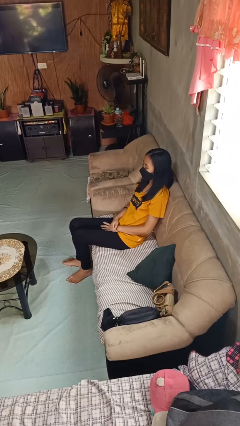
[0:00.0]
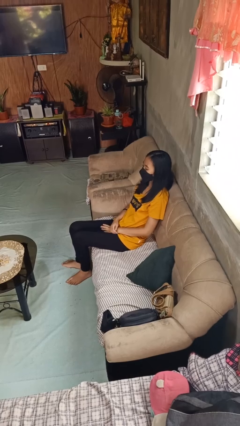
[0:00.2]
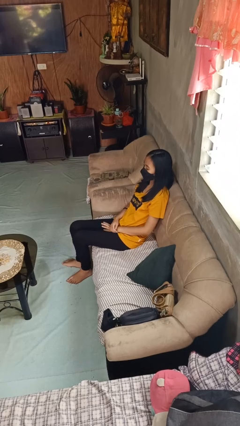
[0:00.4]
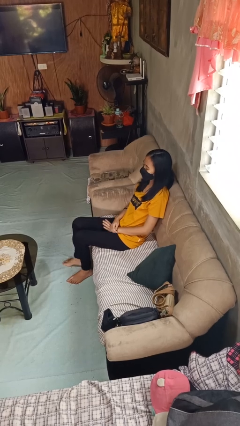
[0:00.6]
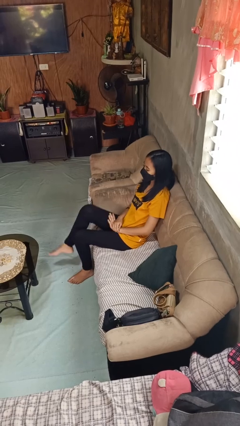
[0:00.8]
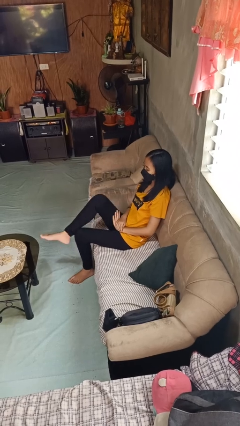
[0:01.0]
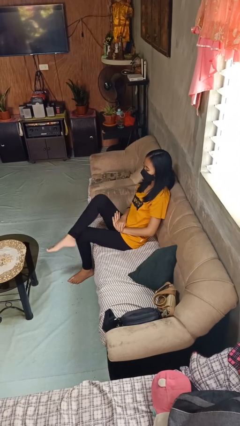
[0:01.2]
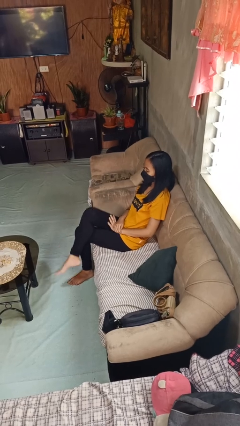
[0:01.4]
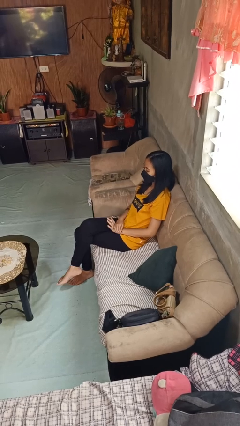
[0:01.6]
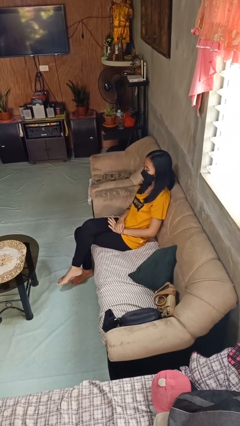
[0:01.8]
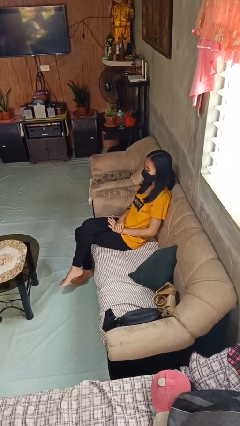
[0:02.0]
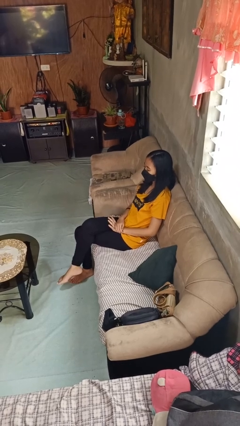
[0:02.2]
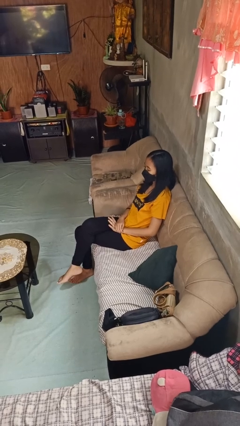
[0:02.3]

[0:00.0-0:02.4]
person crosses legs

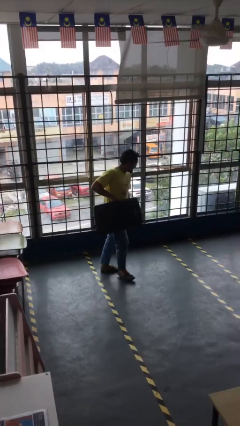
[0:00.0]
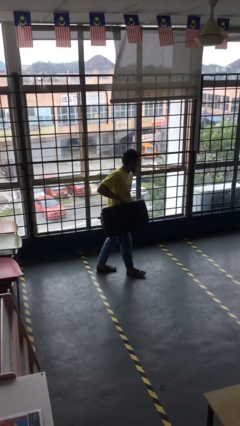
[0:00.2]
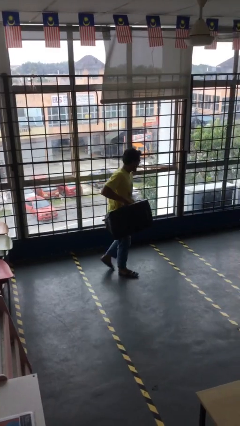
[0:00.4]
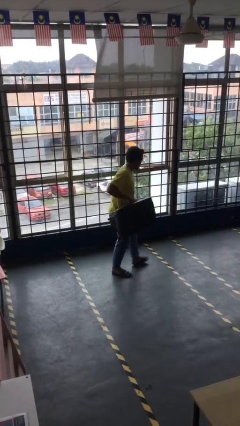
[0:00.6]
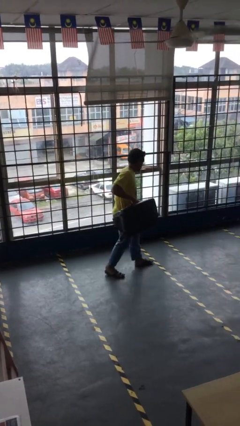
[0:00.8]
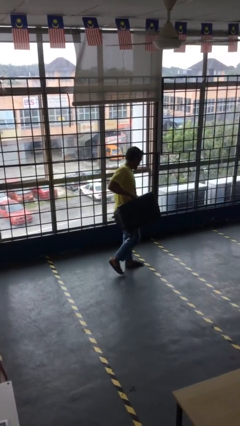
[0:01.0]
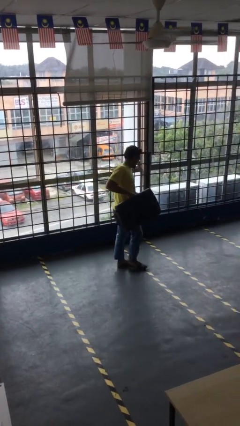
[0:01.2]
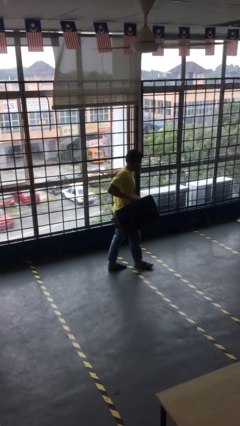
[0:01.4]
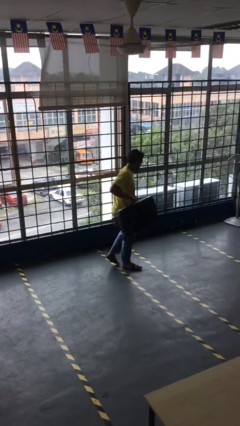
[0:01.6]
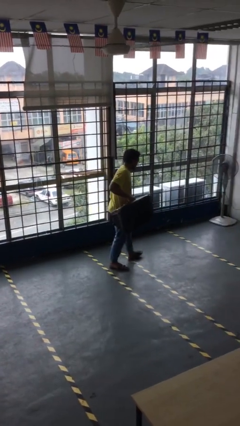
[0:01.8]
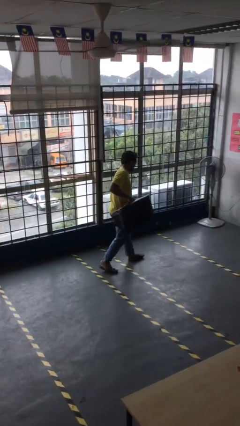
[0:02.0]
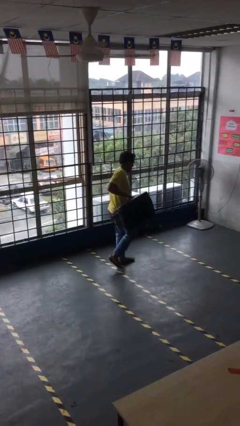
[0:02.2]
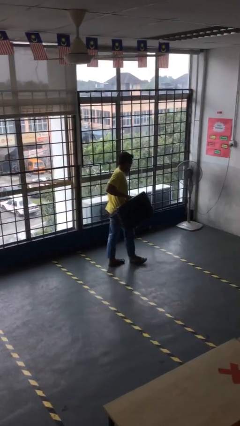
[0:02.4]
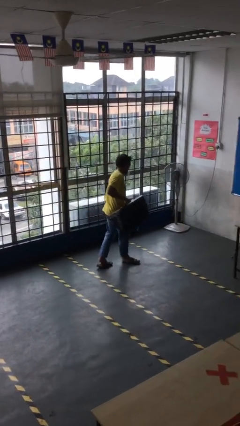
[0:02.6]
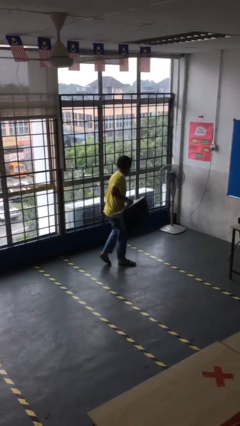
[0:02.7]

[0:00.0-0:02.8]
person carries heavy object

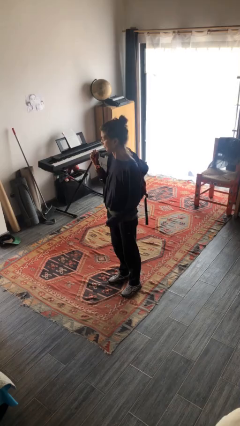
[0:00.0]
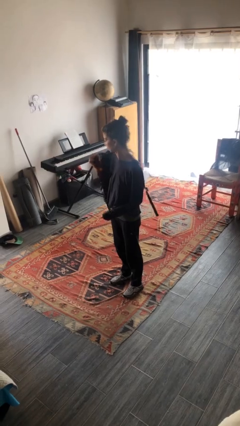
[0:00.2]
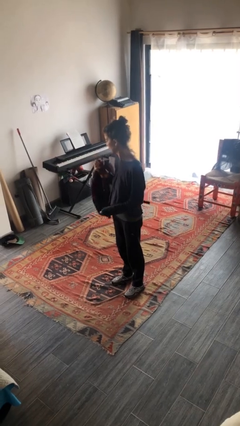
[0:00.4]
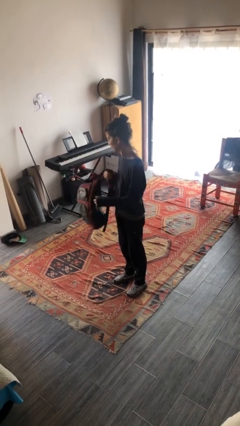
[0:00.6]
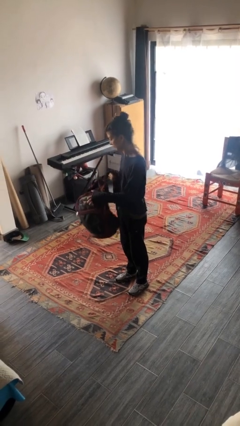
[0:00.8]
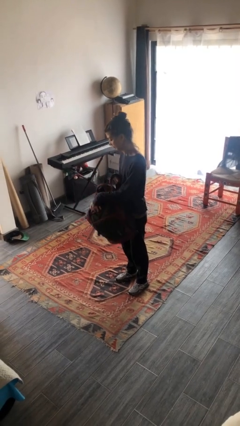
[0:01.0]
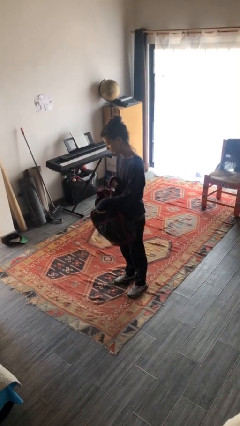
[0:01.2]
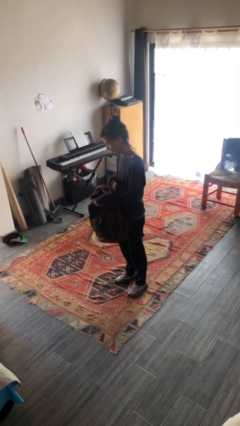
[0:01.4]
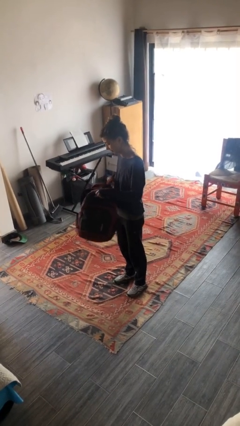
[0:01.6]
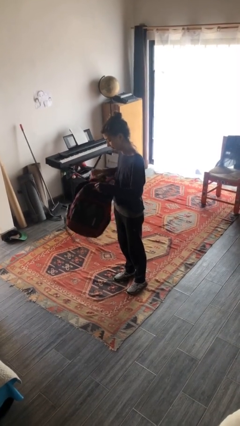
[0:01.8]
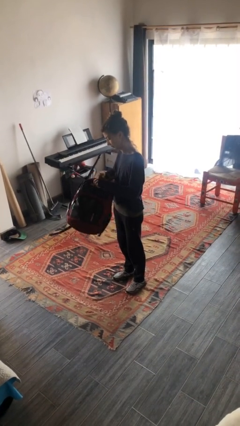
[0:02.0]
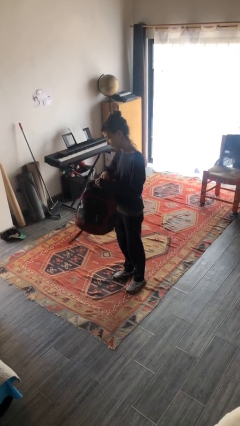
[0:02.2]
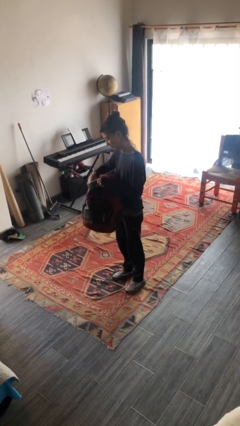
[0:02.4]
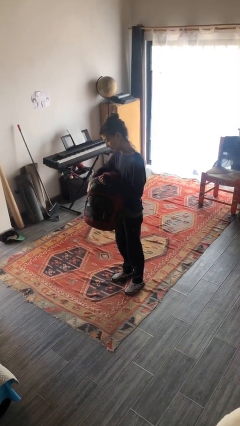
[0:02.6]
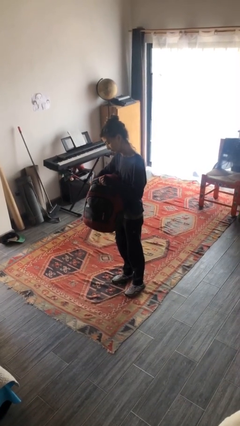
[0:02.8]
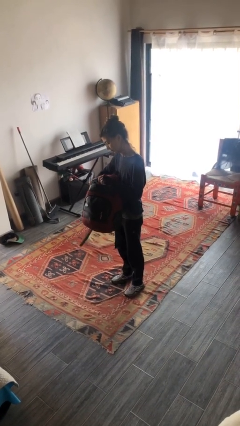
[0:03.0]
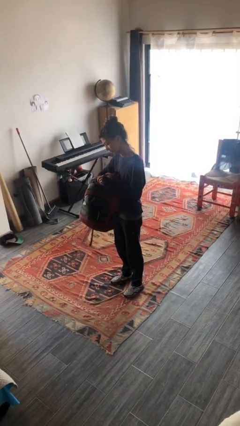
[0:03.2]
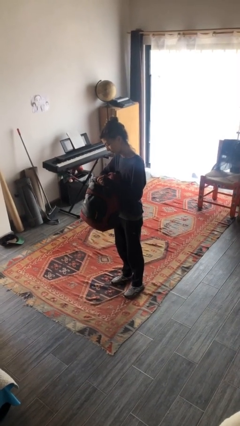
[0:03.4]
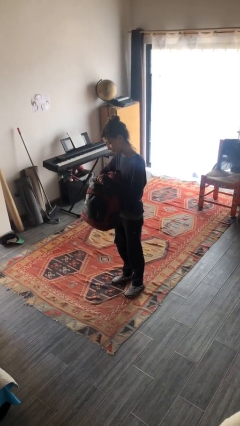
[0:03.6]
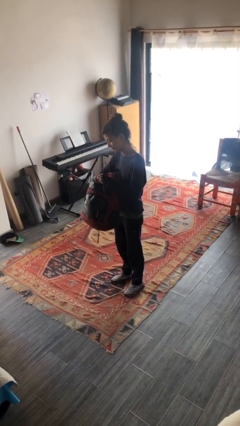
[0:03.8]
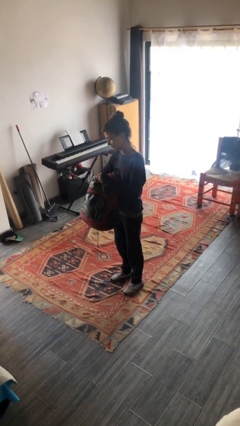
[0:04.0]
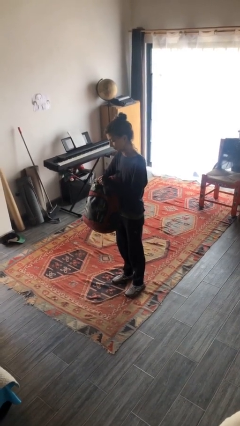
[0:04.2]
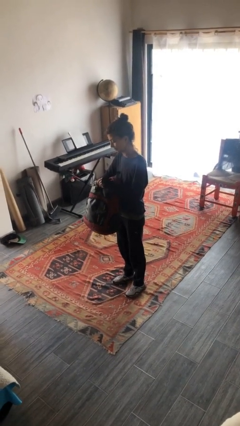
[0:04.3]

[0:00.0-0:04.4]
person searches in backpack

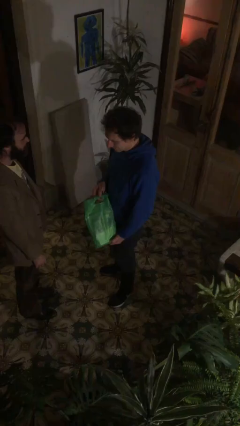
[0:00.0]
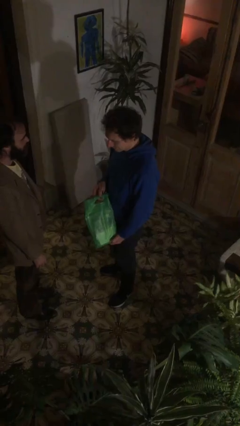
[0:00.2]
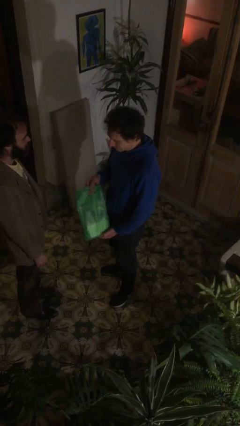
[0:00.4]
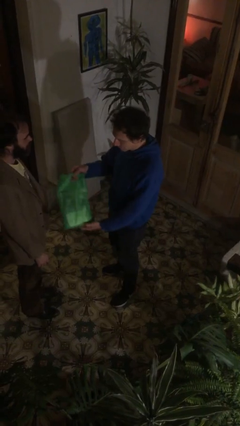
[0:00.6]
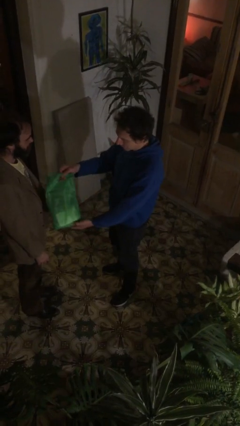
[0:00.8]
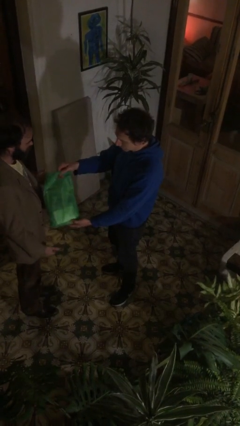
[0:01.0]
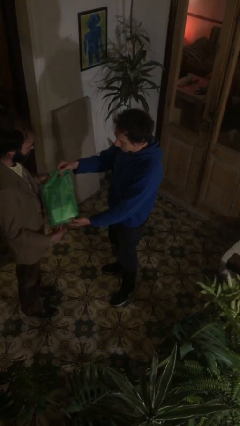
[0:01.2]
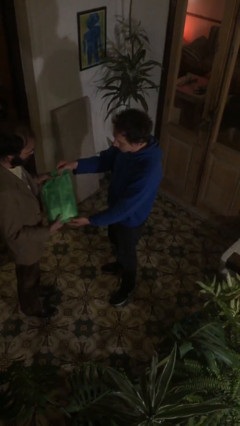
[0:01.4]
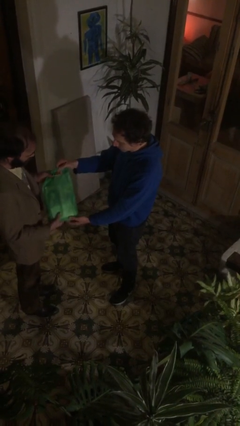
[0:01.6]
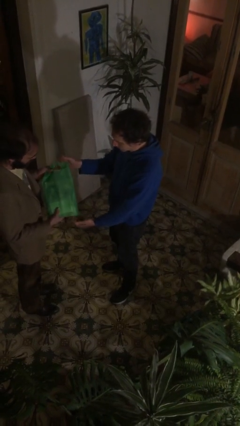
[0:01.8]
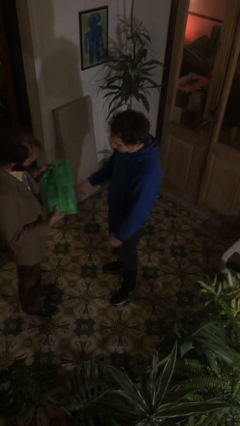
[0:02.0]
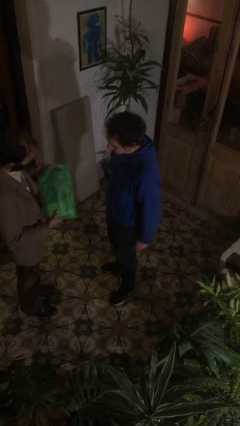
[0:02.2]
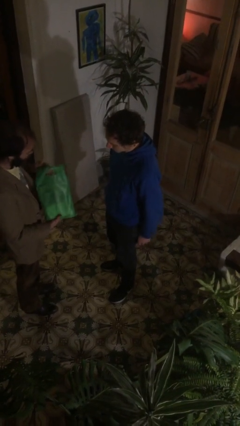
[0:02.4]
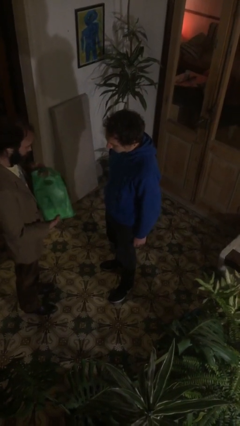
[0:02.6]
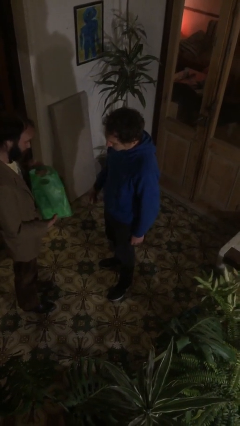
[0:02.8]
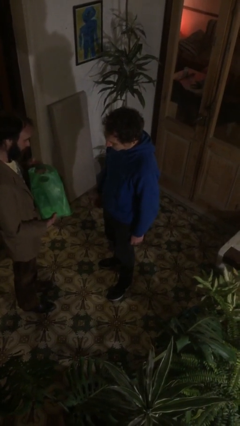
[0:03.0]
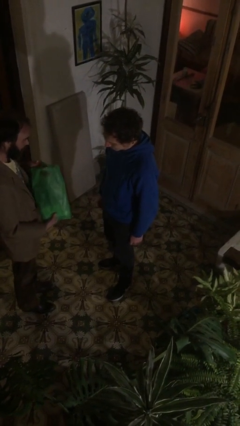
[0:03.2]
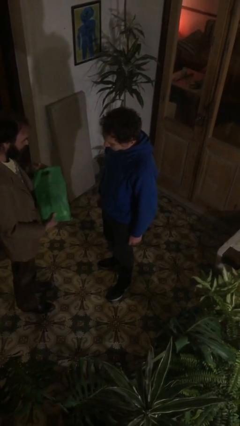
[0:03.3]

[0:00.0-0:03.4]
person transfers object to person

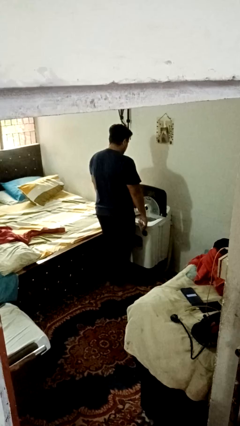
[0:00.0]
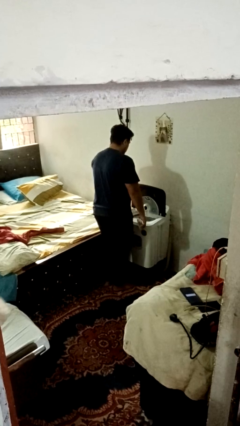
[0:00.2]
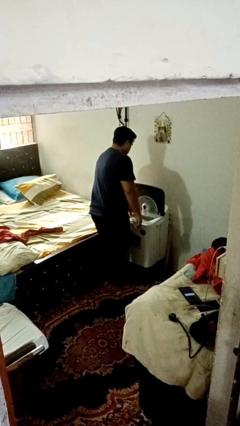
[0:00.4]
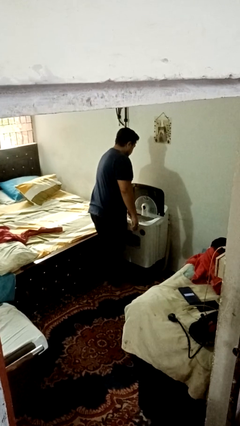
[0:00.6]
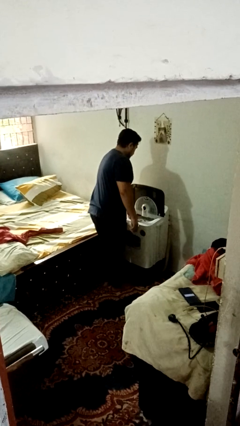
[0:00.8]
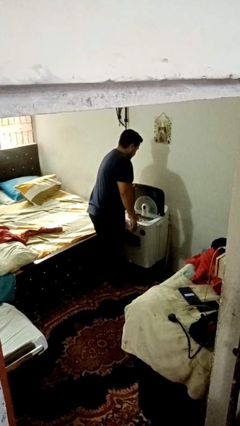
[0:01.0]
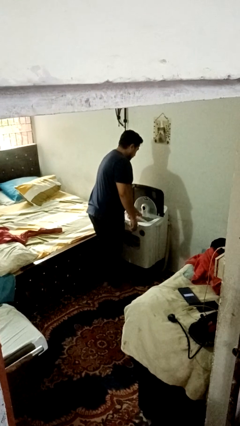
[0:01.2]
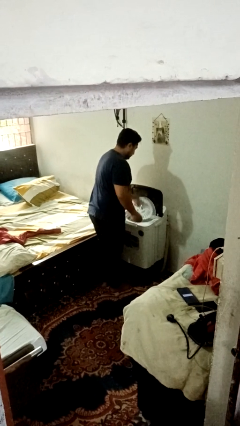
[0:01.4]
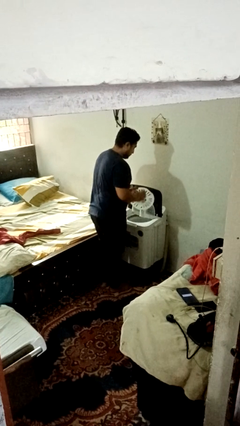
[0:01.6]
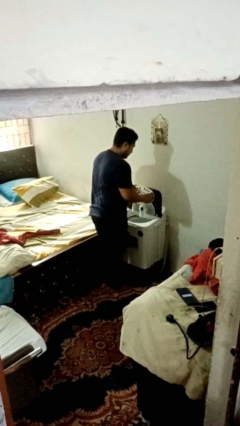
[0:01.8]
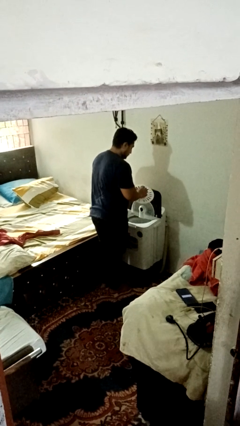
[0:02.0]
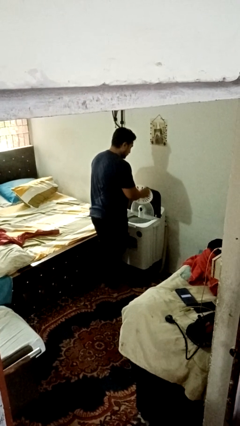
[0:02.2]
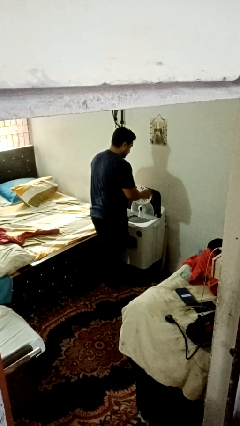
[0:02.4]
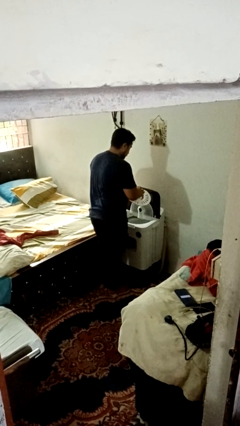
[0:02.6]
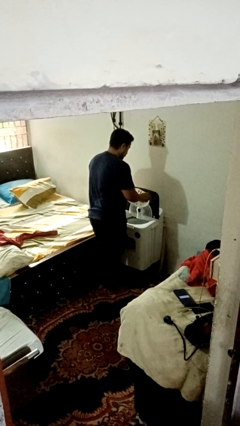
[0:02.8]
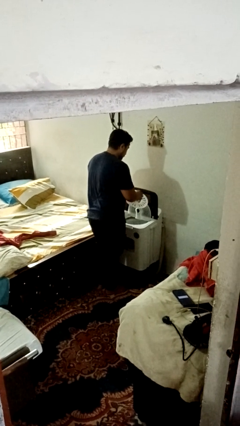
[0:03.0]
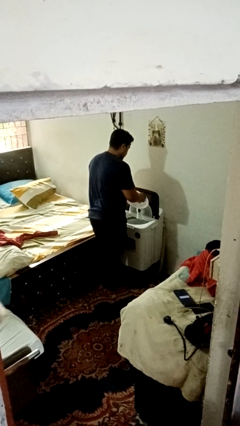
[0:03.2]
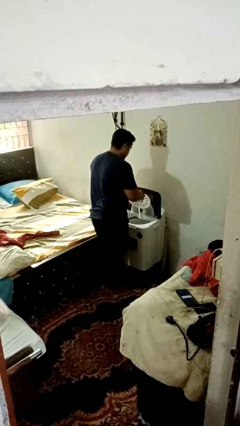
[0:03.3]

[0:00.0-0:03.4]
person cleans dryer lint trap

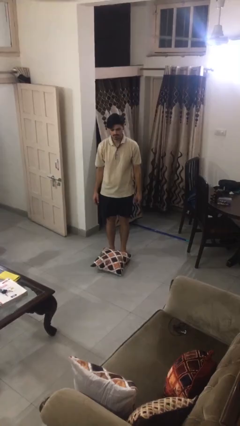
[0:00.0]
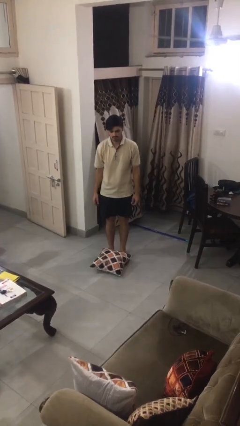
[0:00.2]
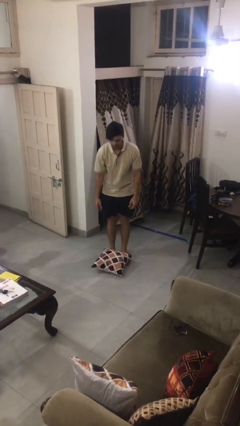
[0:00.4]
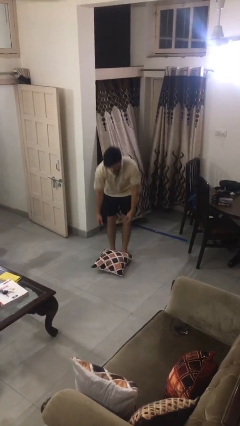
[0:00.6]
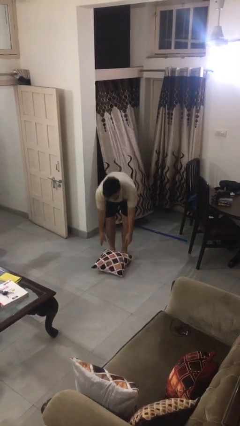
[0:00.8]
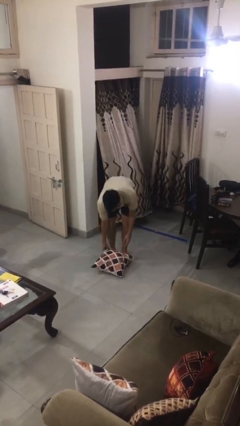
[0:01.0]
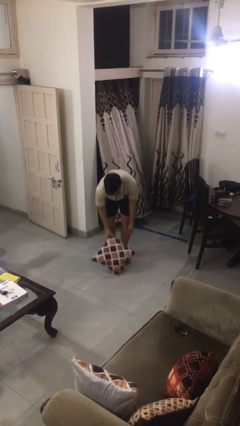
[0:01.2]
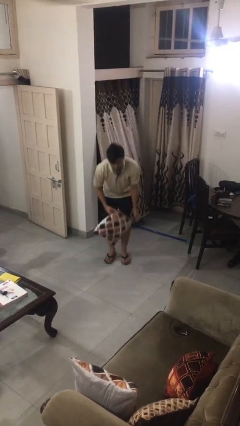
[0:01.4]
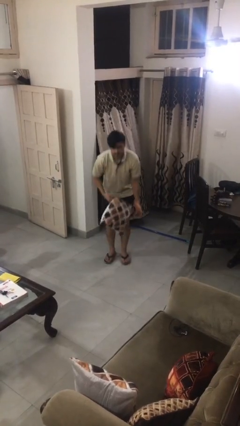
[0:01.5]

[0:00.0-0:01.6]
person picks up object from floor
